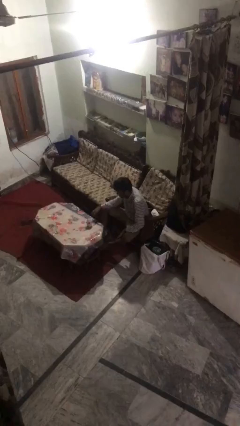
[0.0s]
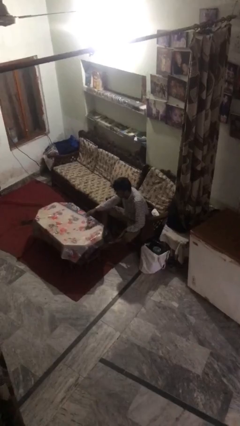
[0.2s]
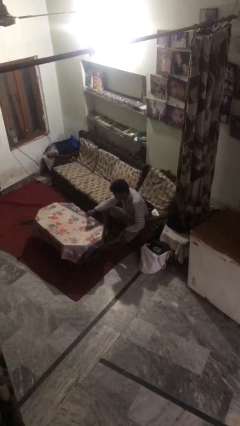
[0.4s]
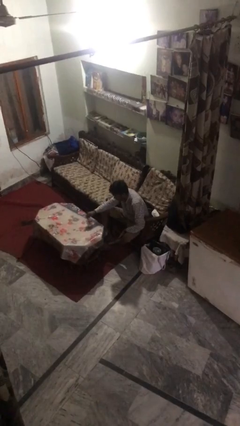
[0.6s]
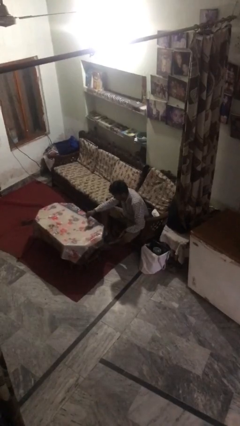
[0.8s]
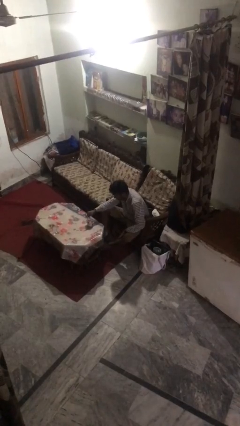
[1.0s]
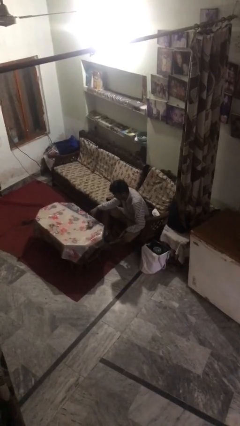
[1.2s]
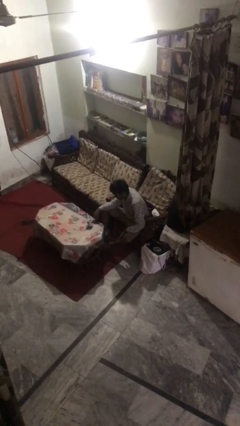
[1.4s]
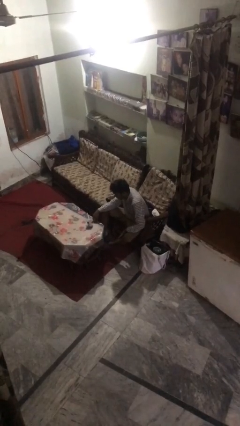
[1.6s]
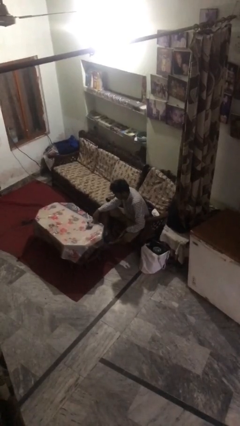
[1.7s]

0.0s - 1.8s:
person stirs mug

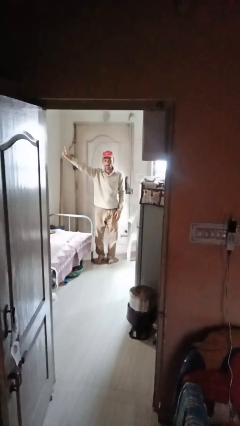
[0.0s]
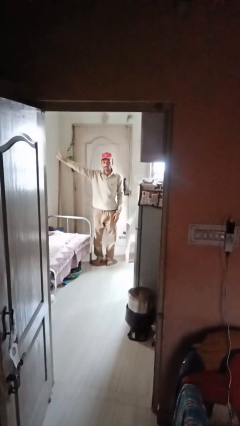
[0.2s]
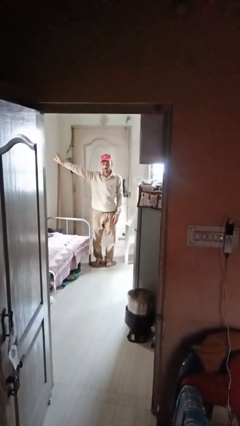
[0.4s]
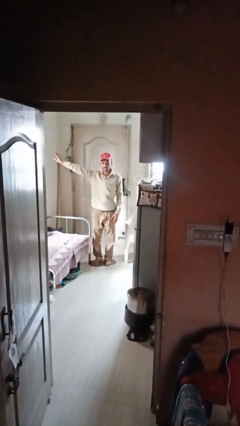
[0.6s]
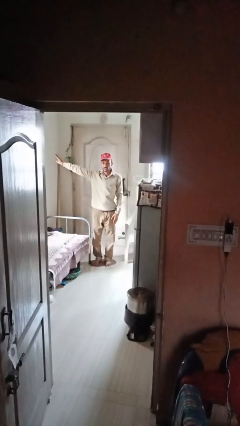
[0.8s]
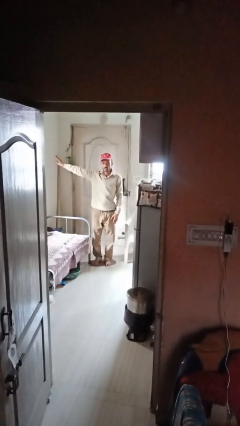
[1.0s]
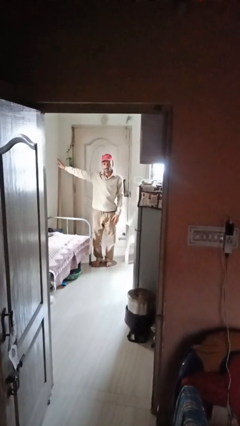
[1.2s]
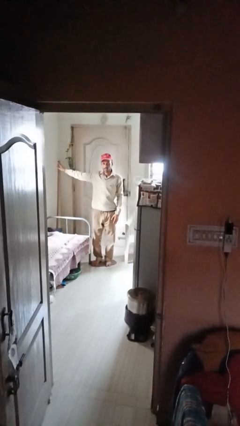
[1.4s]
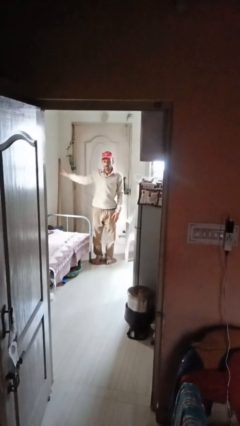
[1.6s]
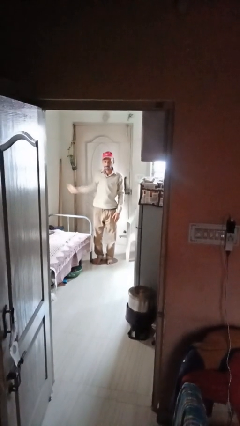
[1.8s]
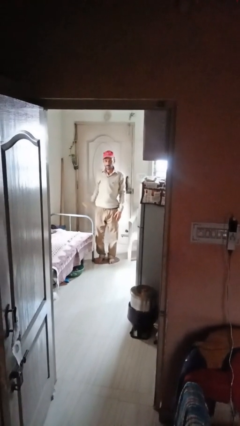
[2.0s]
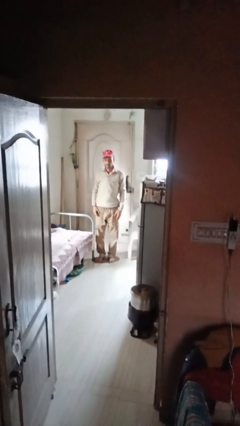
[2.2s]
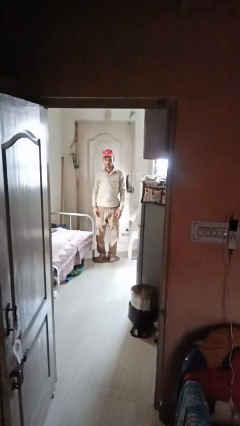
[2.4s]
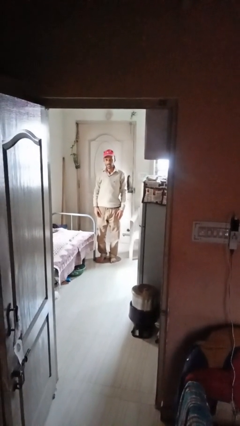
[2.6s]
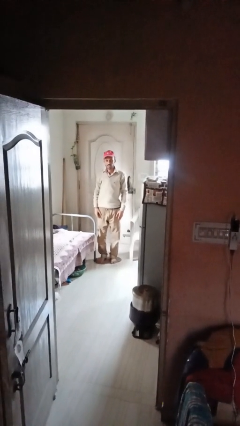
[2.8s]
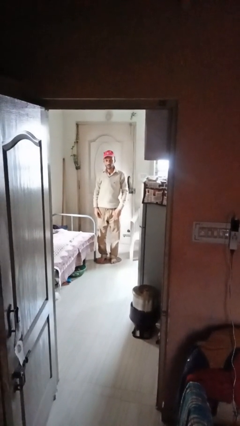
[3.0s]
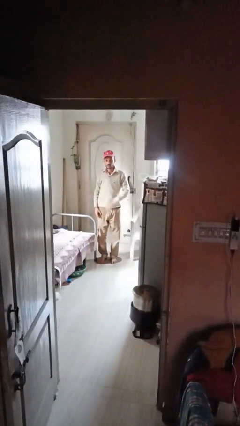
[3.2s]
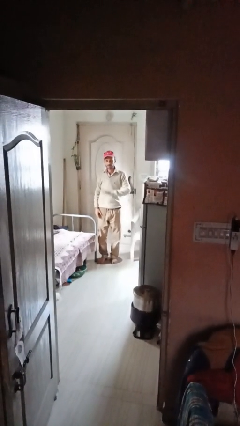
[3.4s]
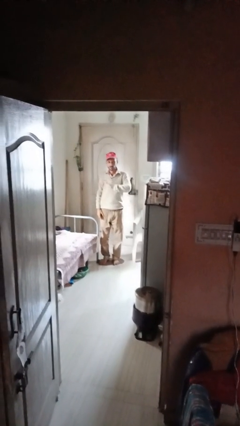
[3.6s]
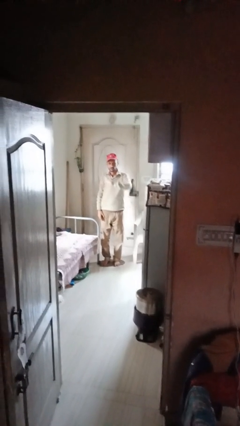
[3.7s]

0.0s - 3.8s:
person gestures swipe right

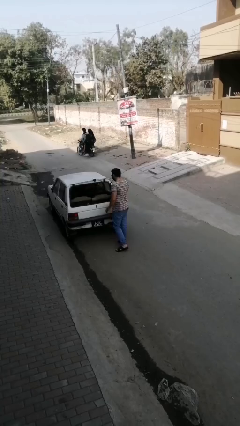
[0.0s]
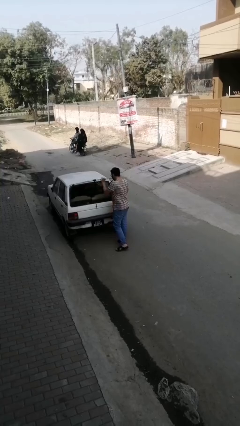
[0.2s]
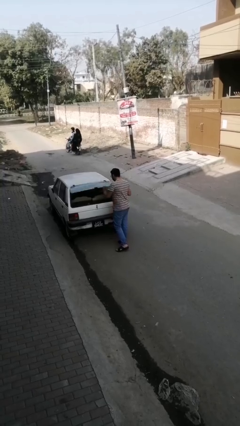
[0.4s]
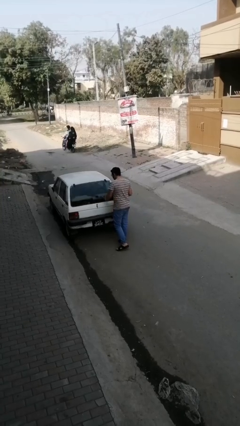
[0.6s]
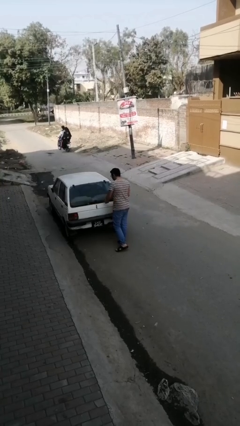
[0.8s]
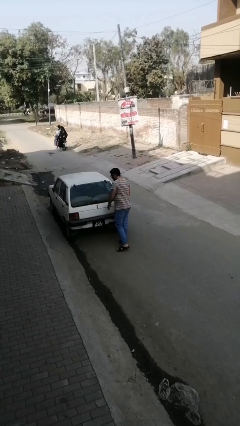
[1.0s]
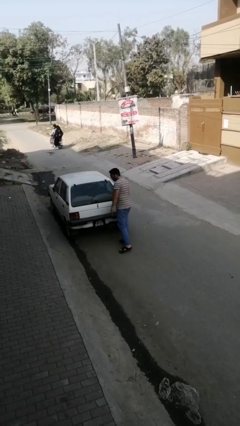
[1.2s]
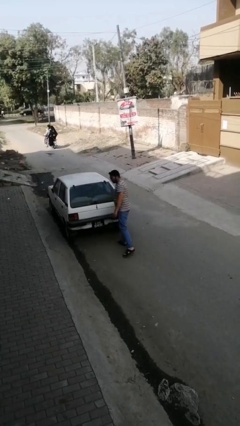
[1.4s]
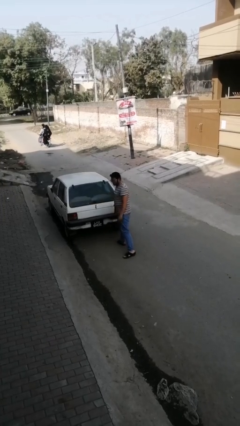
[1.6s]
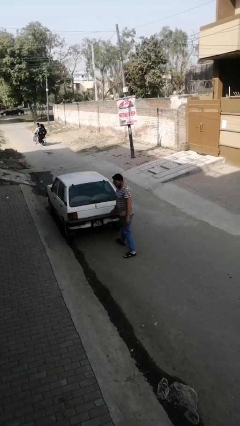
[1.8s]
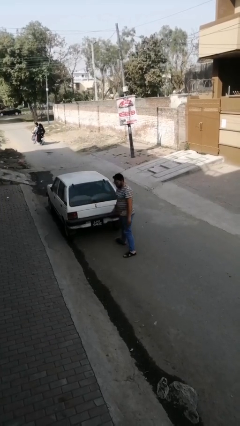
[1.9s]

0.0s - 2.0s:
person closes car trunk

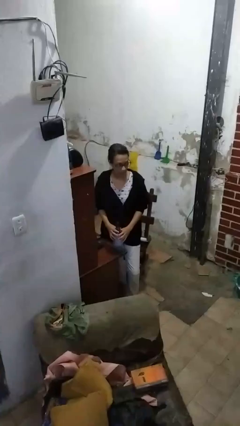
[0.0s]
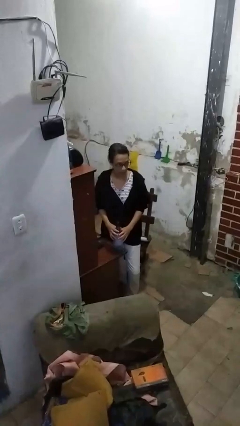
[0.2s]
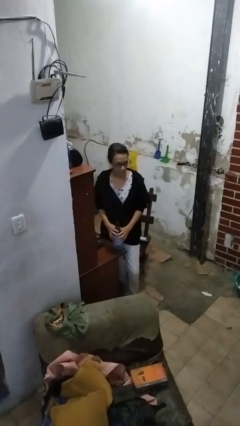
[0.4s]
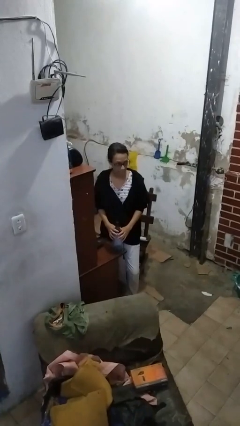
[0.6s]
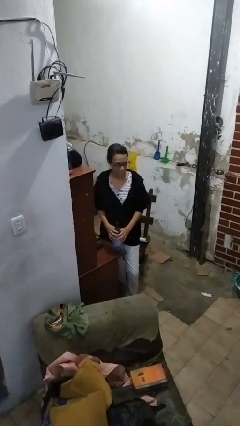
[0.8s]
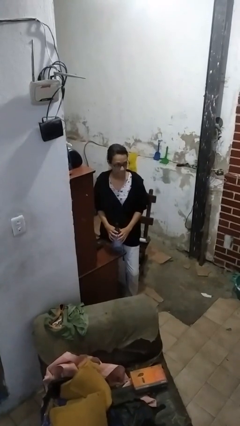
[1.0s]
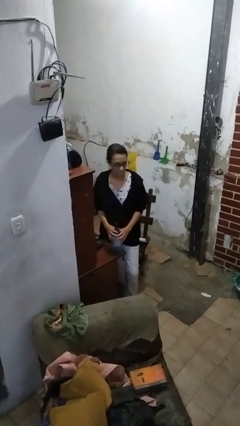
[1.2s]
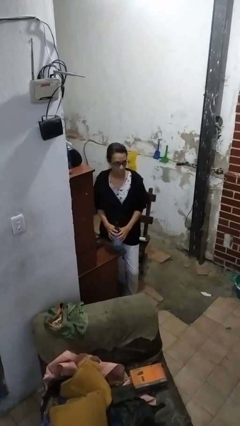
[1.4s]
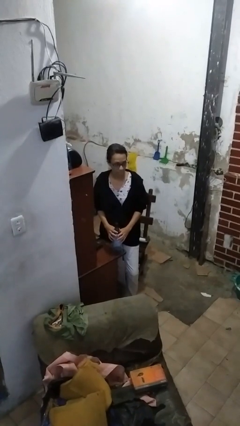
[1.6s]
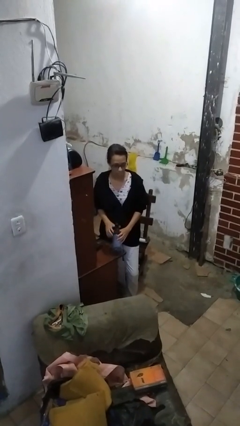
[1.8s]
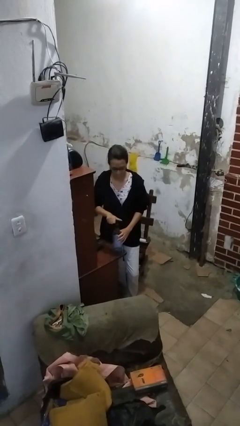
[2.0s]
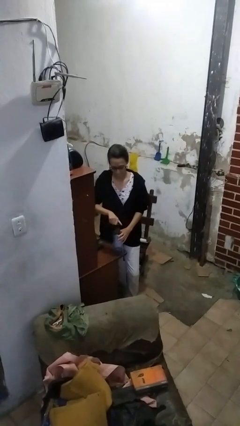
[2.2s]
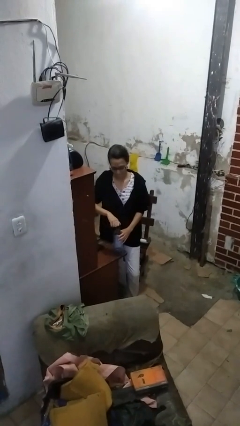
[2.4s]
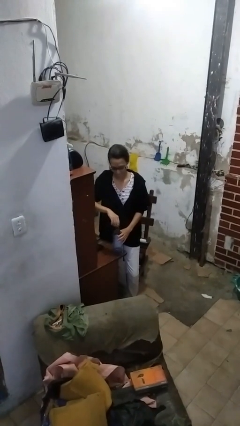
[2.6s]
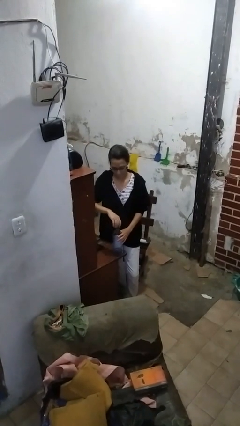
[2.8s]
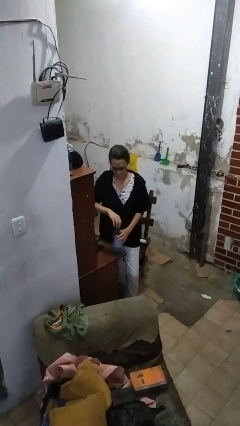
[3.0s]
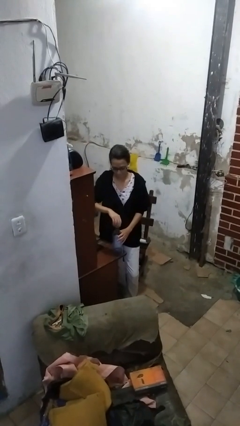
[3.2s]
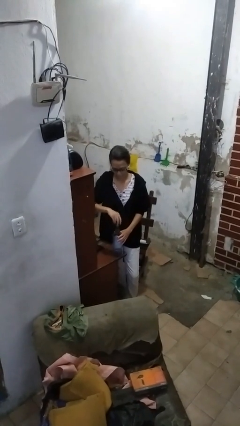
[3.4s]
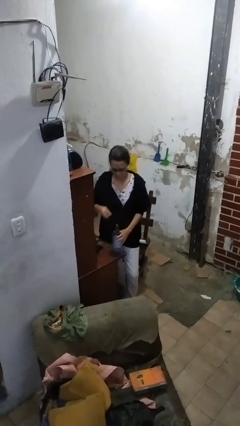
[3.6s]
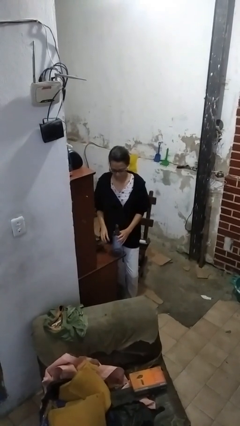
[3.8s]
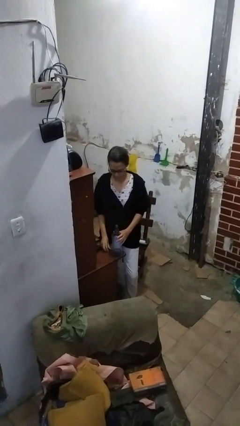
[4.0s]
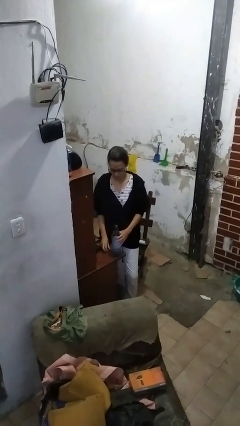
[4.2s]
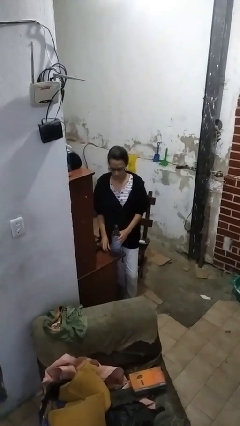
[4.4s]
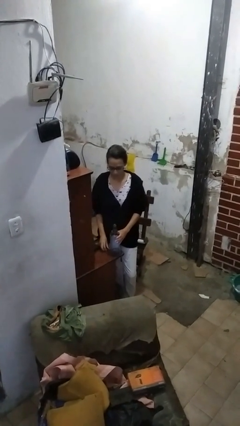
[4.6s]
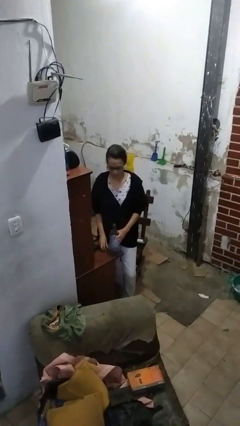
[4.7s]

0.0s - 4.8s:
person unscrews lid from bottle

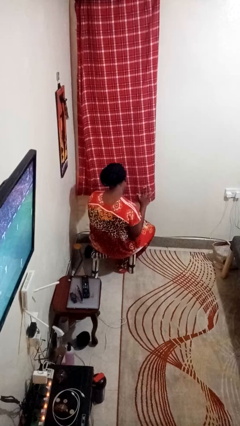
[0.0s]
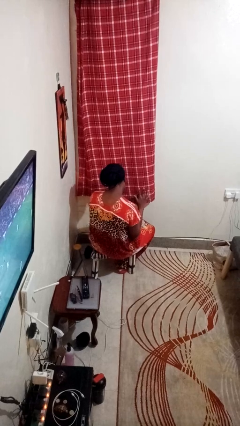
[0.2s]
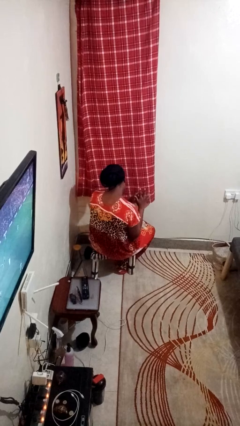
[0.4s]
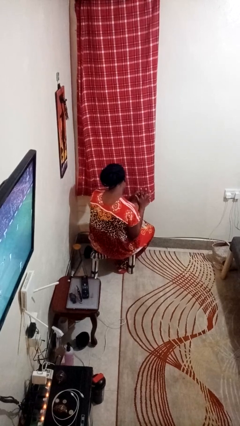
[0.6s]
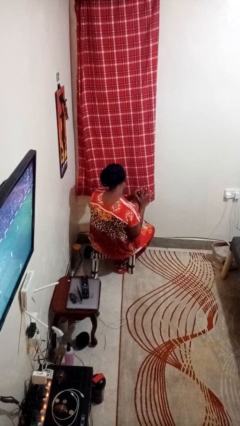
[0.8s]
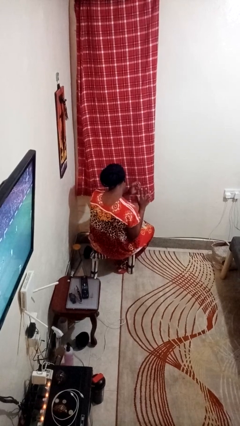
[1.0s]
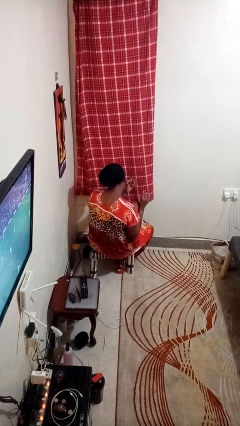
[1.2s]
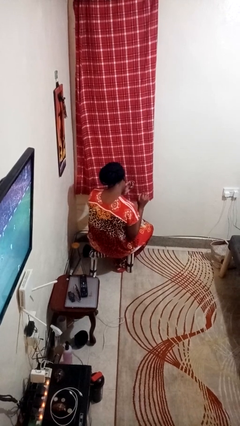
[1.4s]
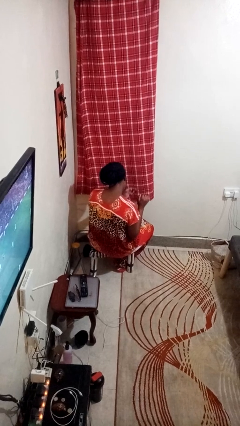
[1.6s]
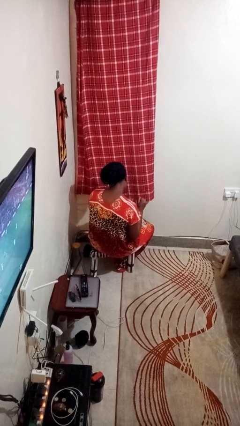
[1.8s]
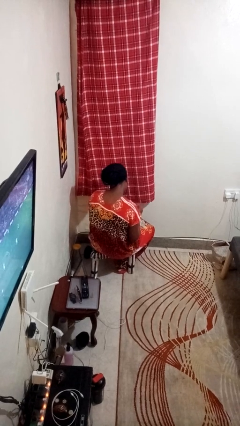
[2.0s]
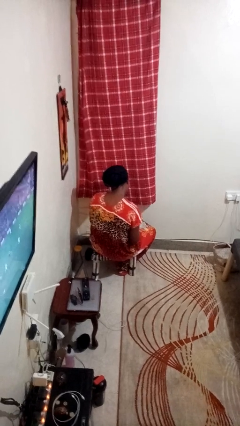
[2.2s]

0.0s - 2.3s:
person takes off ring

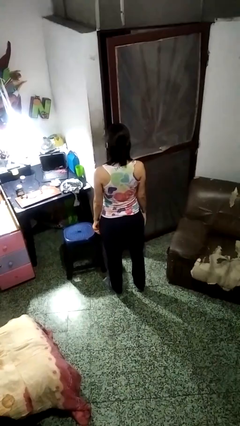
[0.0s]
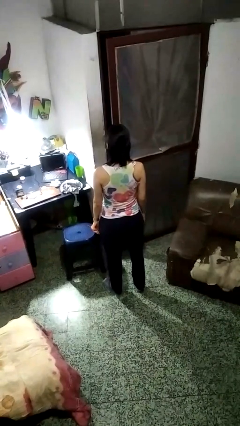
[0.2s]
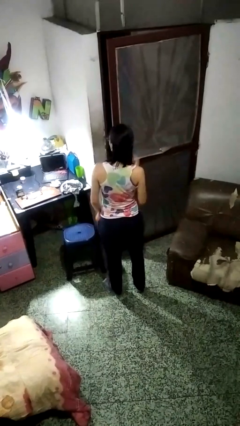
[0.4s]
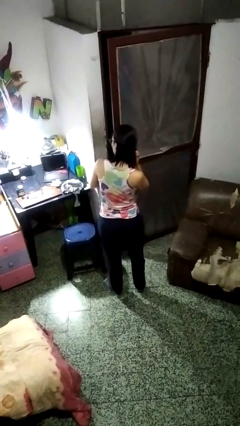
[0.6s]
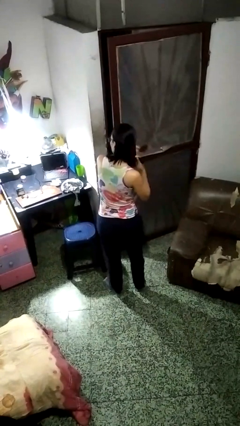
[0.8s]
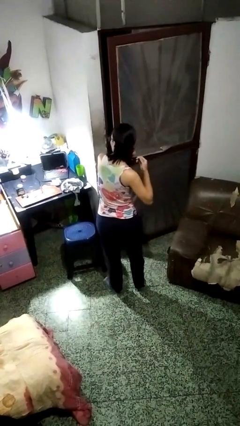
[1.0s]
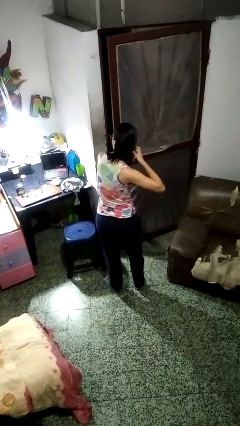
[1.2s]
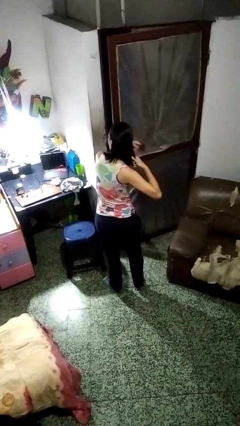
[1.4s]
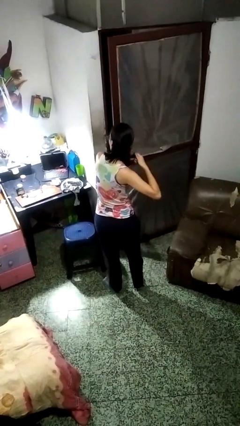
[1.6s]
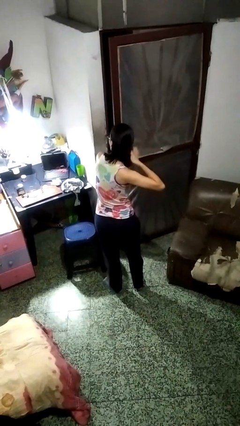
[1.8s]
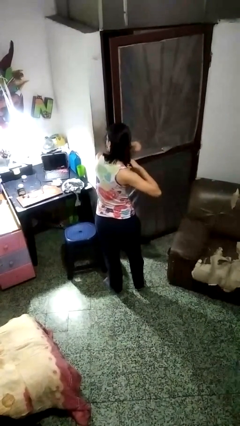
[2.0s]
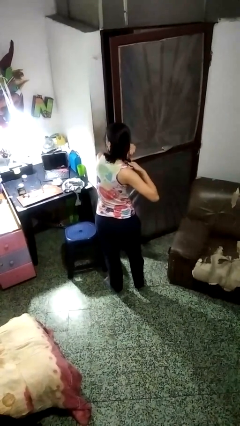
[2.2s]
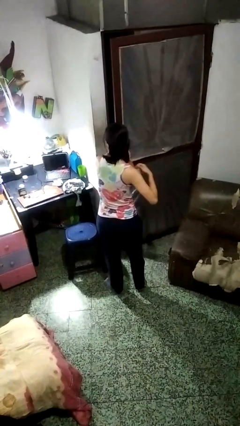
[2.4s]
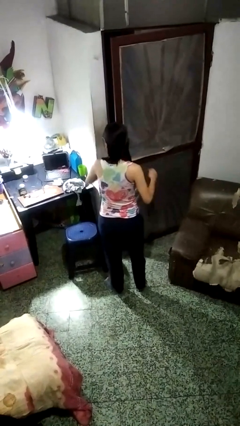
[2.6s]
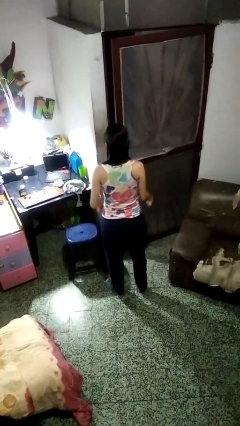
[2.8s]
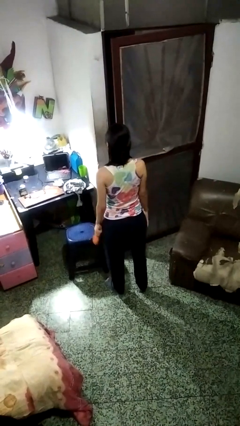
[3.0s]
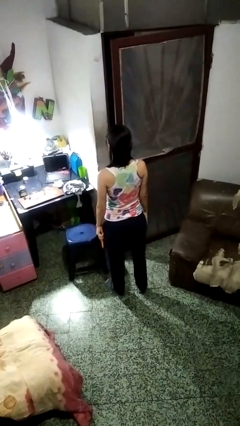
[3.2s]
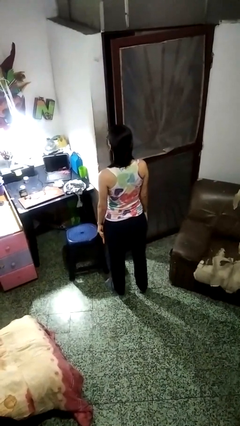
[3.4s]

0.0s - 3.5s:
person brushes hair
